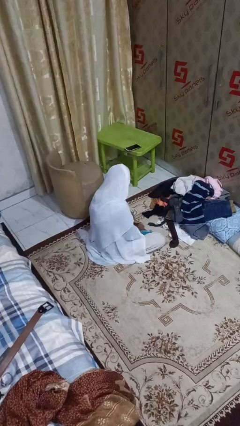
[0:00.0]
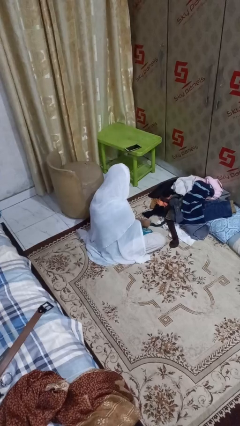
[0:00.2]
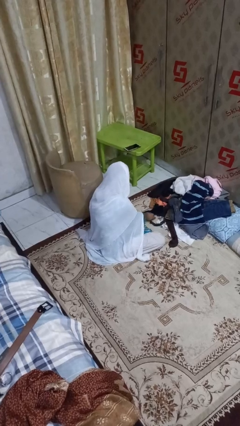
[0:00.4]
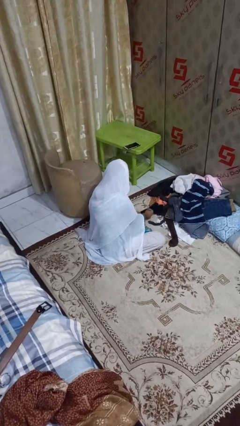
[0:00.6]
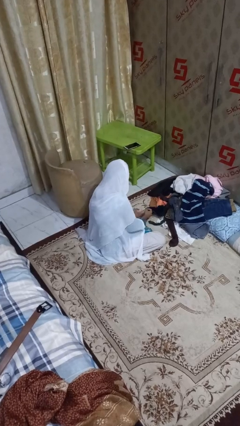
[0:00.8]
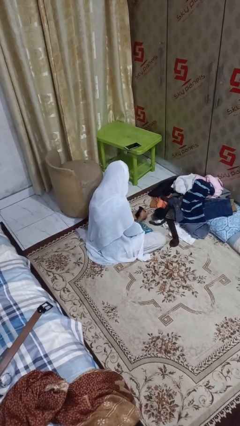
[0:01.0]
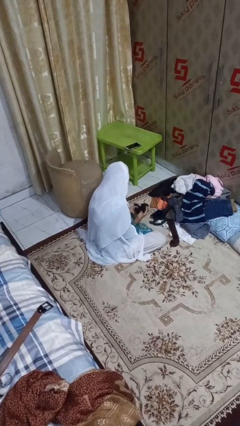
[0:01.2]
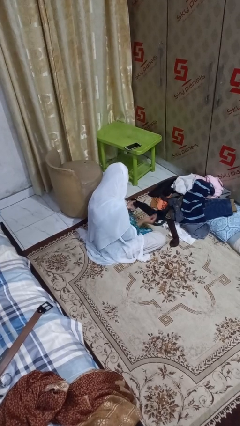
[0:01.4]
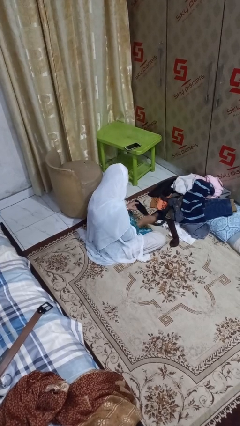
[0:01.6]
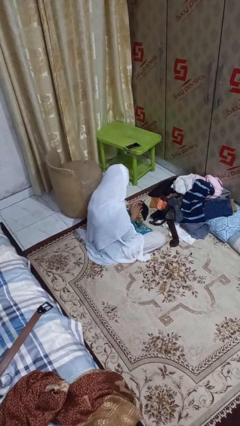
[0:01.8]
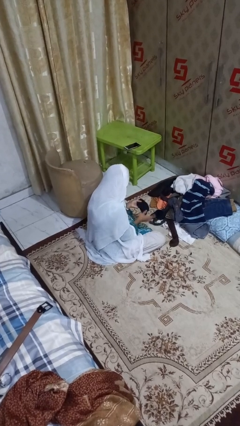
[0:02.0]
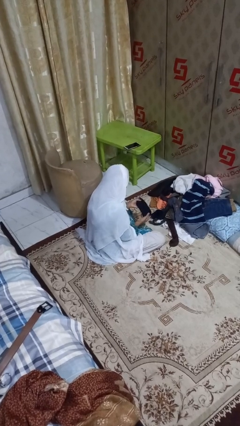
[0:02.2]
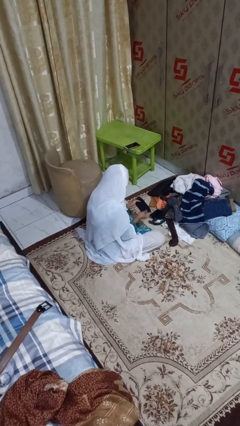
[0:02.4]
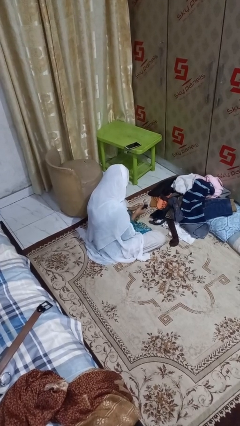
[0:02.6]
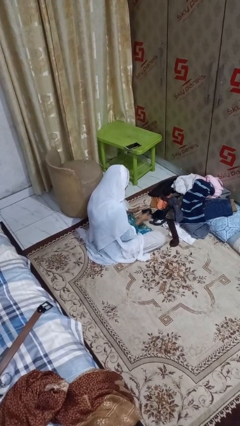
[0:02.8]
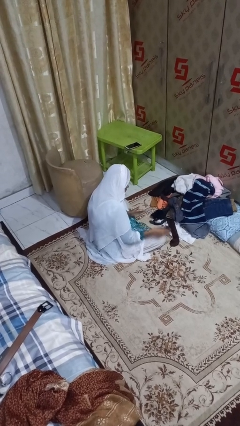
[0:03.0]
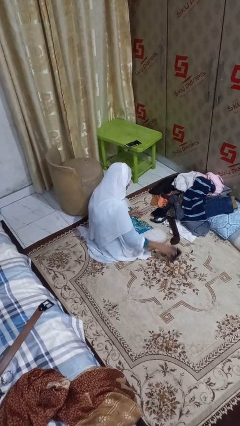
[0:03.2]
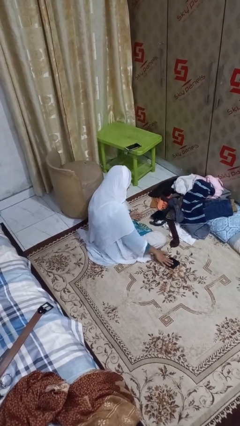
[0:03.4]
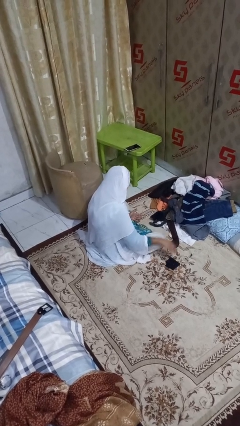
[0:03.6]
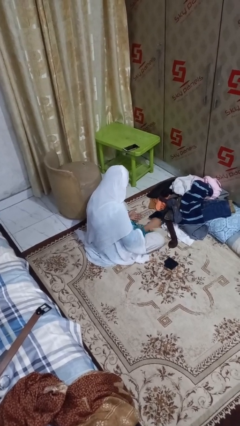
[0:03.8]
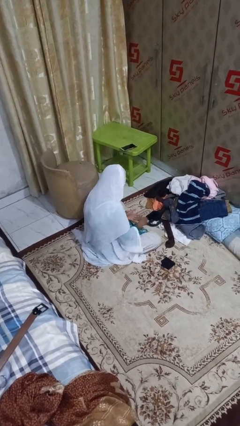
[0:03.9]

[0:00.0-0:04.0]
person folds socks

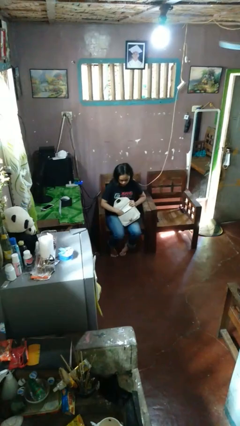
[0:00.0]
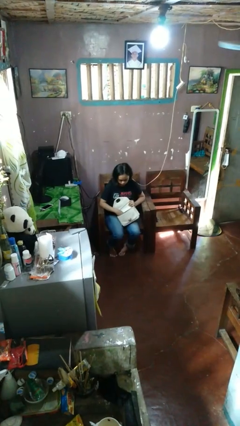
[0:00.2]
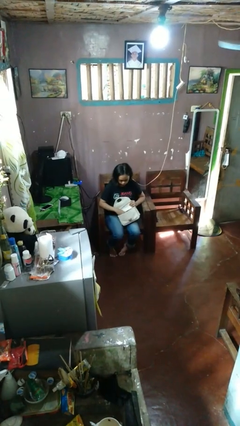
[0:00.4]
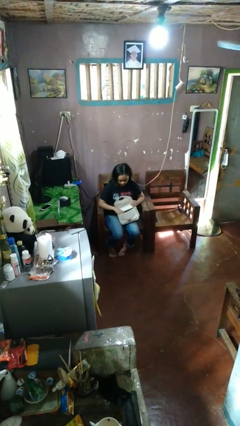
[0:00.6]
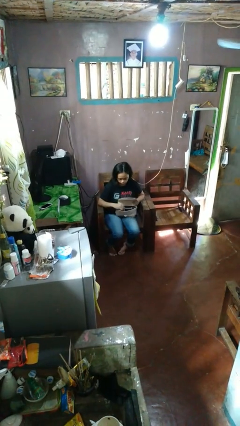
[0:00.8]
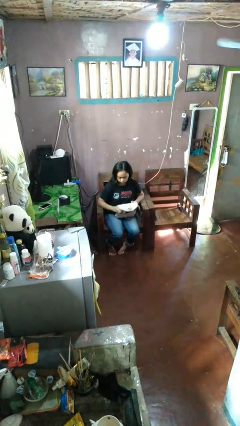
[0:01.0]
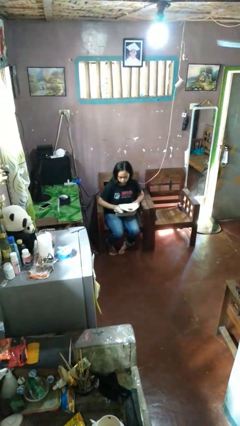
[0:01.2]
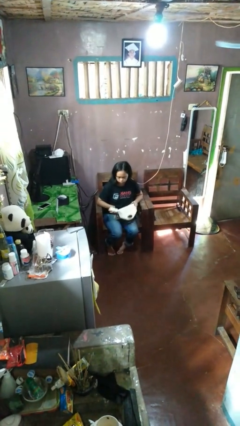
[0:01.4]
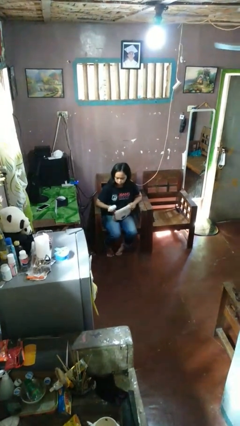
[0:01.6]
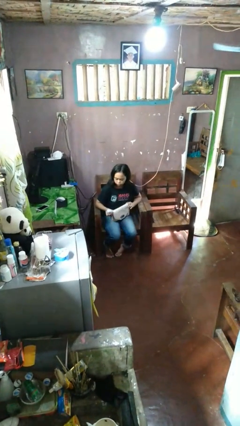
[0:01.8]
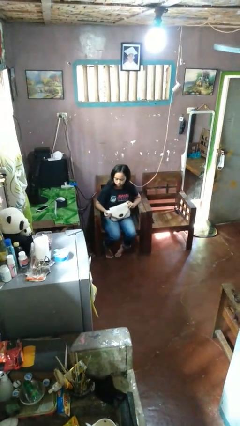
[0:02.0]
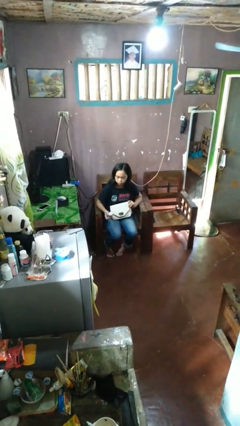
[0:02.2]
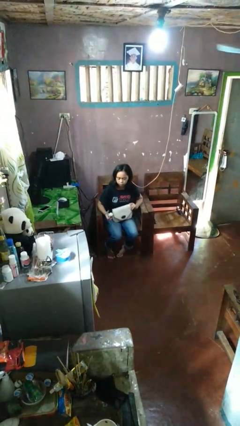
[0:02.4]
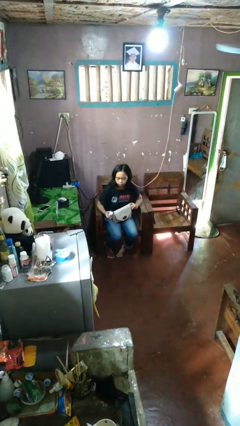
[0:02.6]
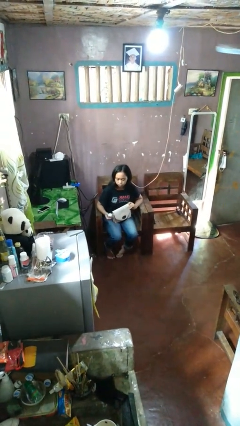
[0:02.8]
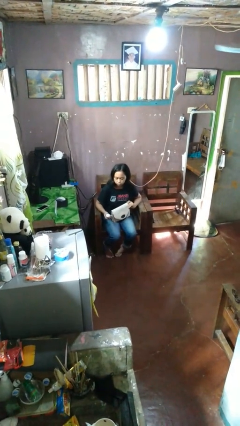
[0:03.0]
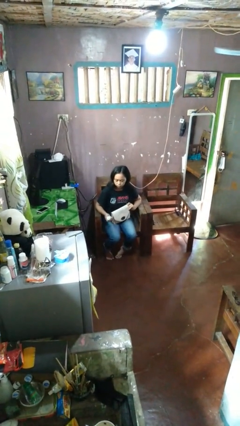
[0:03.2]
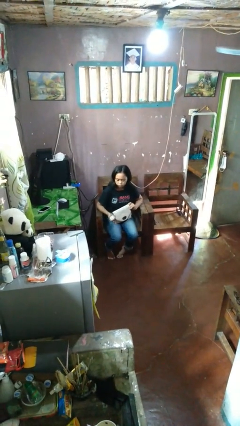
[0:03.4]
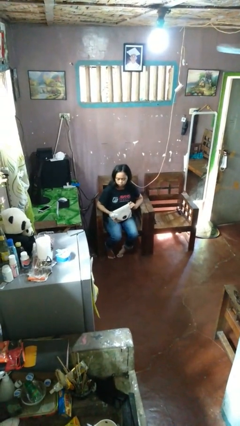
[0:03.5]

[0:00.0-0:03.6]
person takes object from purse

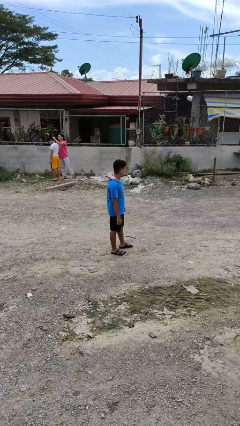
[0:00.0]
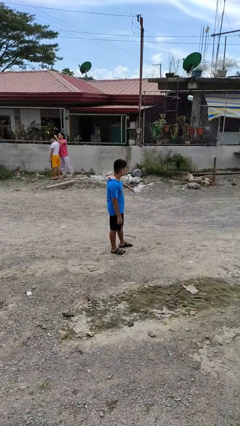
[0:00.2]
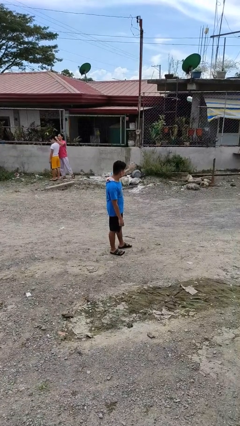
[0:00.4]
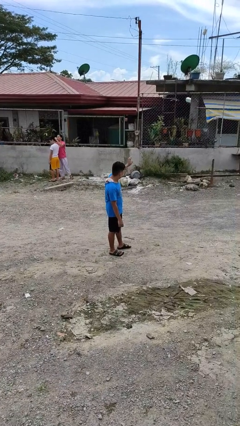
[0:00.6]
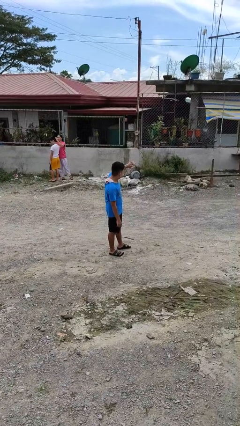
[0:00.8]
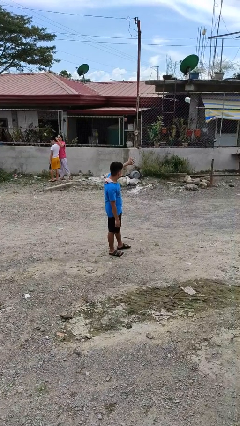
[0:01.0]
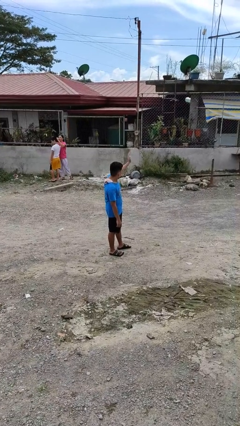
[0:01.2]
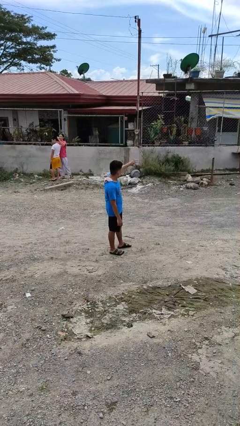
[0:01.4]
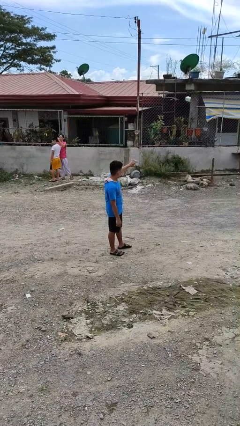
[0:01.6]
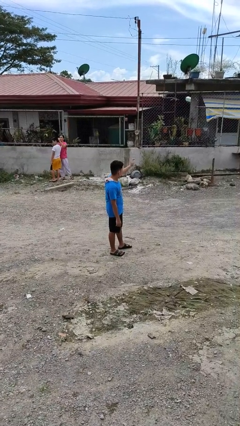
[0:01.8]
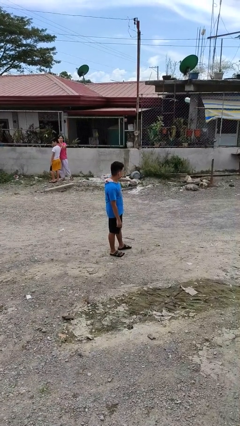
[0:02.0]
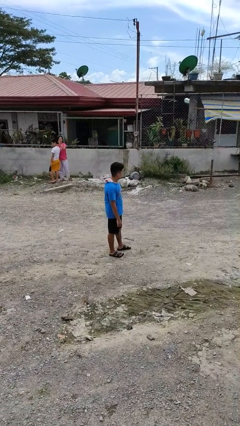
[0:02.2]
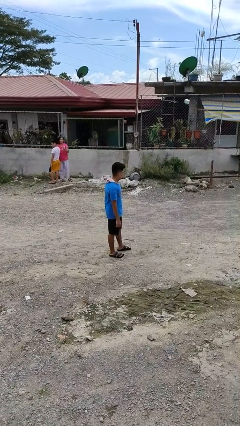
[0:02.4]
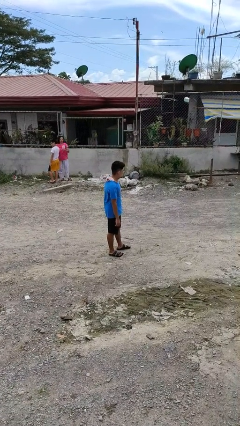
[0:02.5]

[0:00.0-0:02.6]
person waves at person

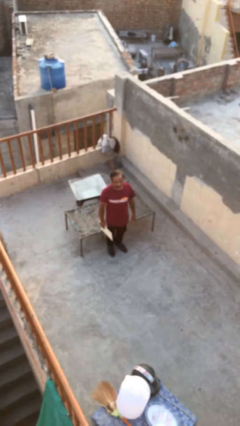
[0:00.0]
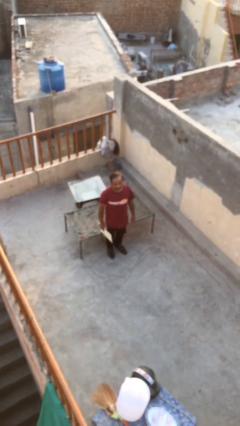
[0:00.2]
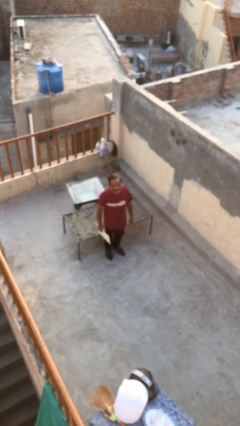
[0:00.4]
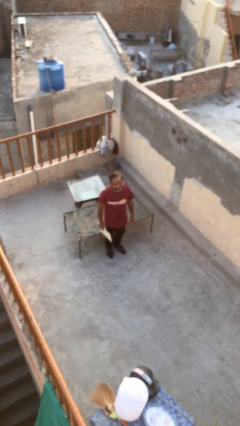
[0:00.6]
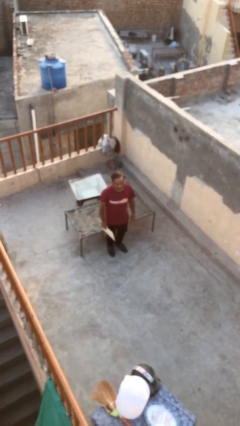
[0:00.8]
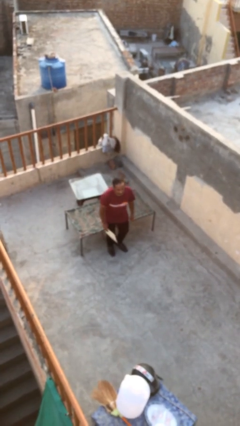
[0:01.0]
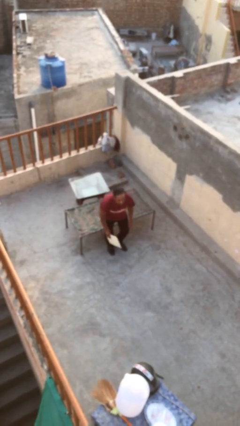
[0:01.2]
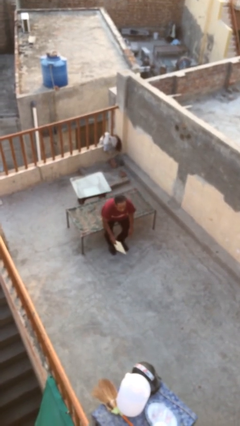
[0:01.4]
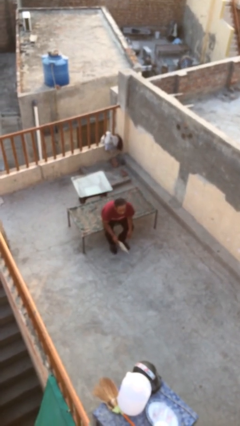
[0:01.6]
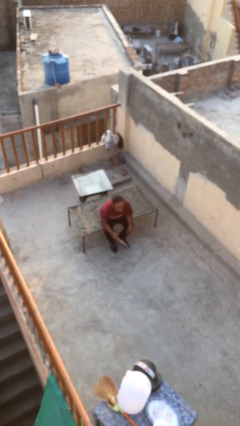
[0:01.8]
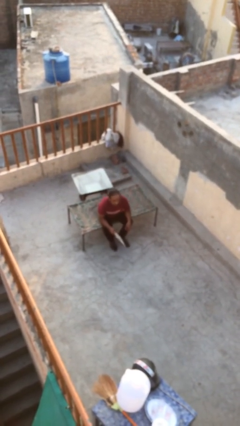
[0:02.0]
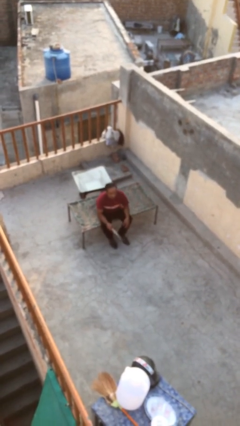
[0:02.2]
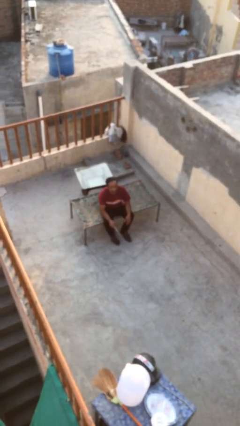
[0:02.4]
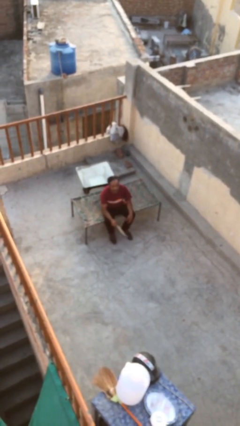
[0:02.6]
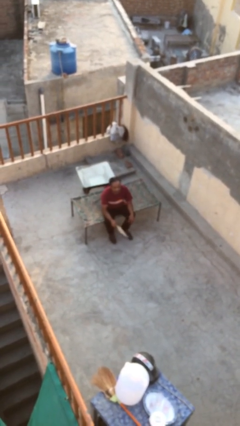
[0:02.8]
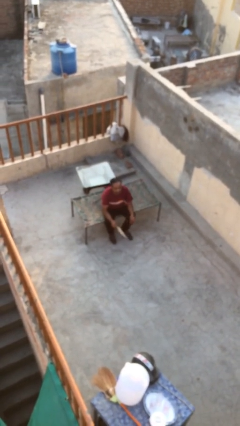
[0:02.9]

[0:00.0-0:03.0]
person sits down

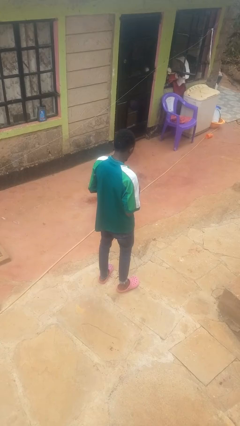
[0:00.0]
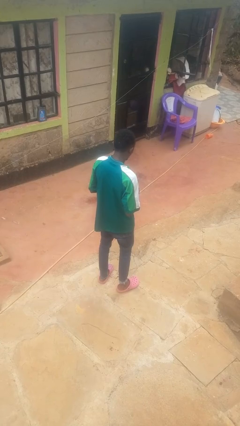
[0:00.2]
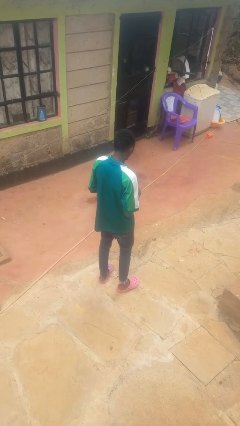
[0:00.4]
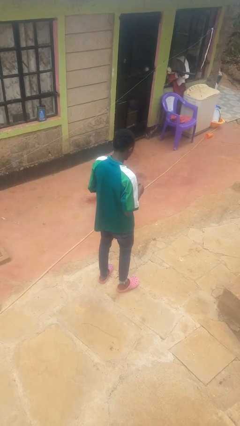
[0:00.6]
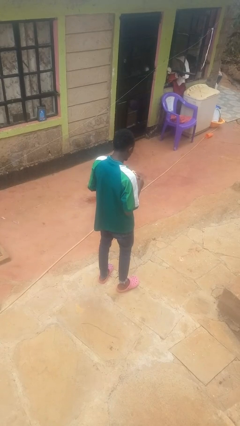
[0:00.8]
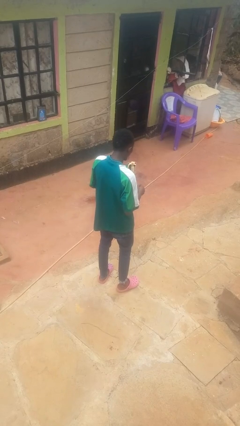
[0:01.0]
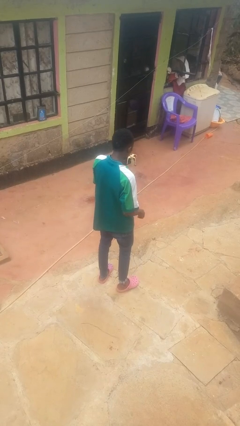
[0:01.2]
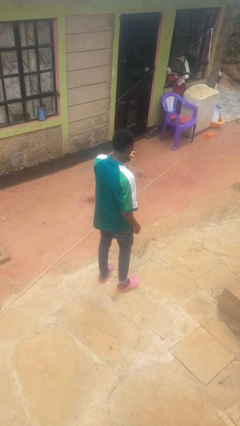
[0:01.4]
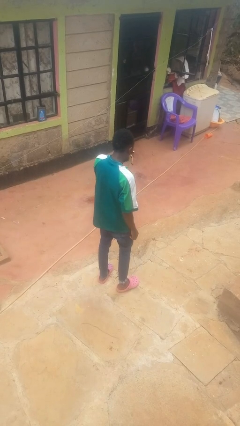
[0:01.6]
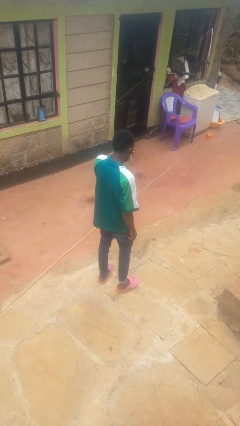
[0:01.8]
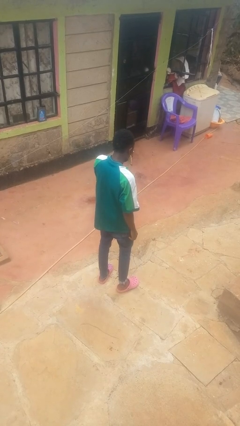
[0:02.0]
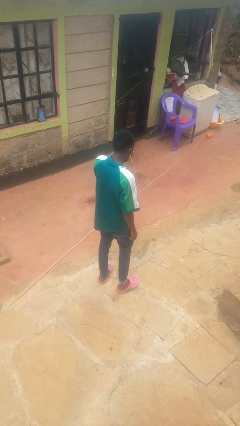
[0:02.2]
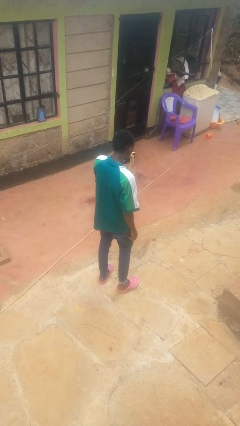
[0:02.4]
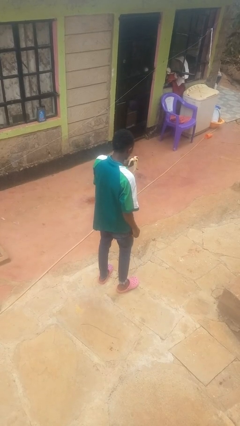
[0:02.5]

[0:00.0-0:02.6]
person eats banana

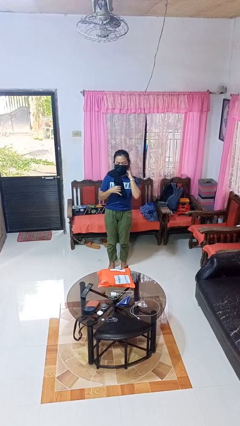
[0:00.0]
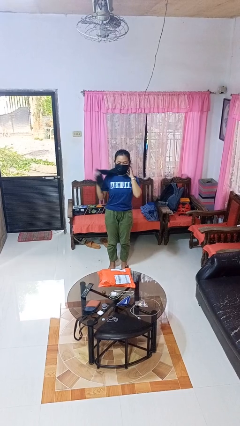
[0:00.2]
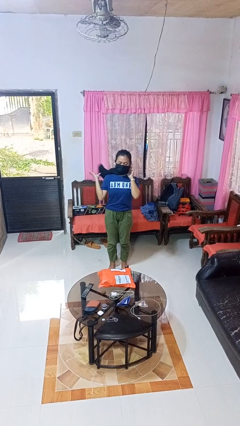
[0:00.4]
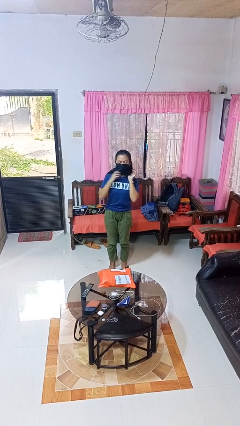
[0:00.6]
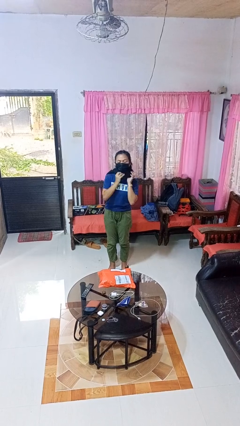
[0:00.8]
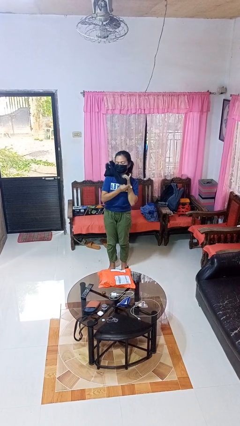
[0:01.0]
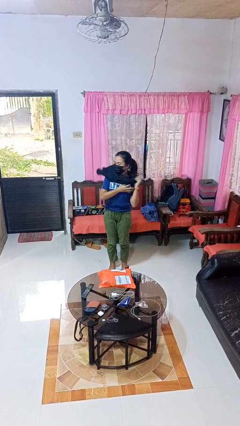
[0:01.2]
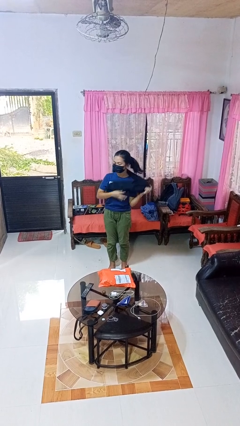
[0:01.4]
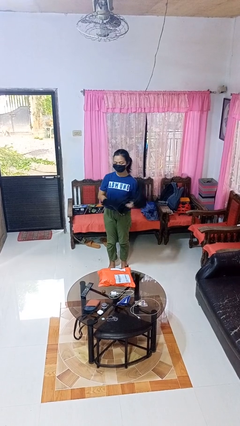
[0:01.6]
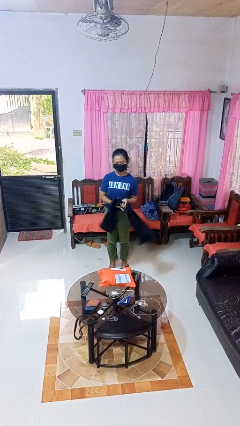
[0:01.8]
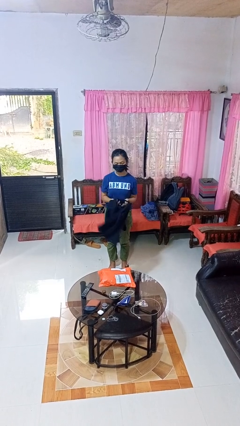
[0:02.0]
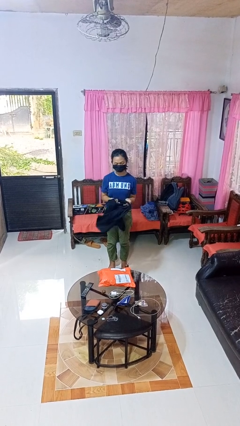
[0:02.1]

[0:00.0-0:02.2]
person takes off scarf
